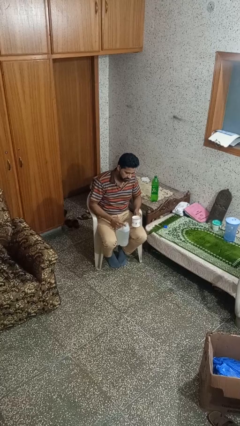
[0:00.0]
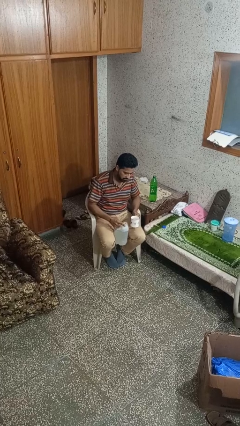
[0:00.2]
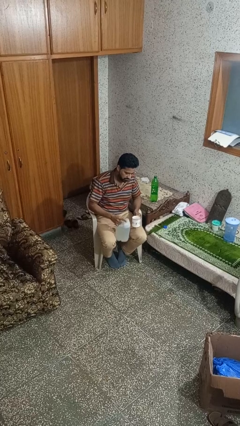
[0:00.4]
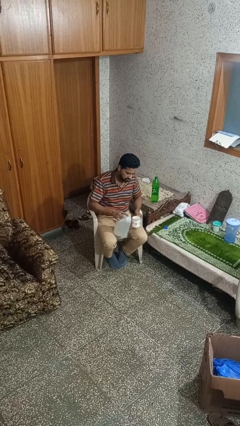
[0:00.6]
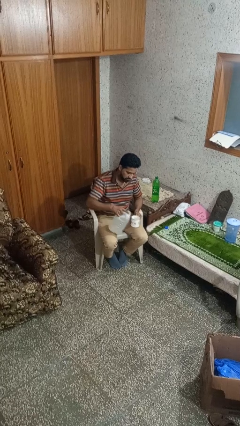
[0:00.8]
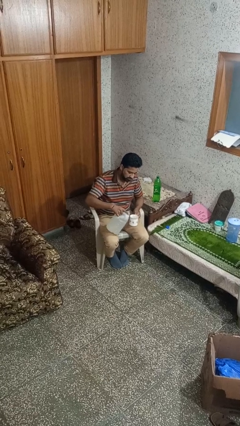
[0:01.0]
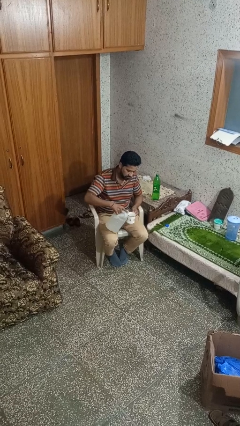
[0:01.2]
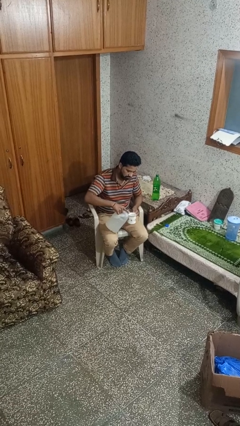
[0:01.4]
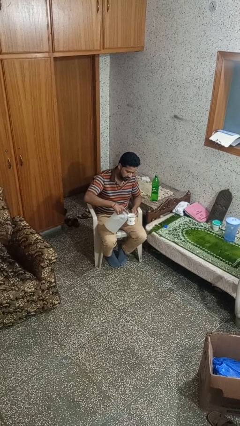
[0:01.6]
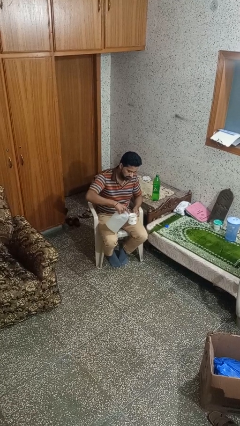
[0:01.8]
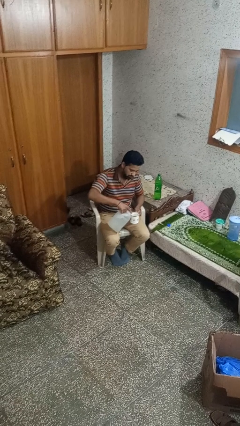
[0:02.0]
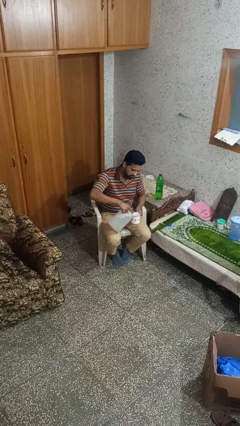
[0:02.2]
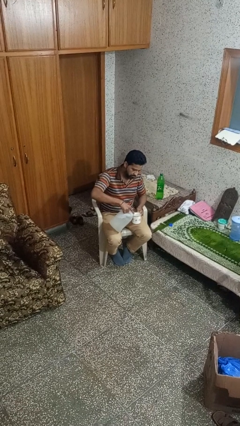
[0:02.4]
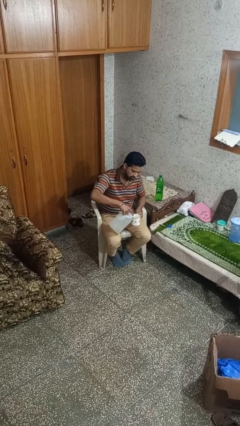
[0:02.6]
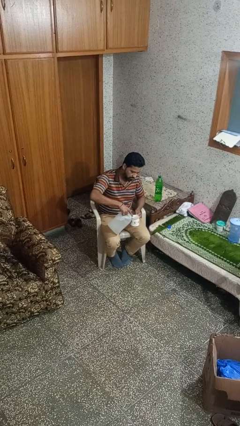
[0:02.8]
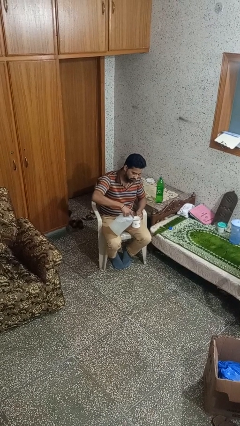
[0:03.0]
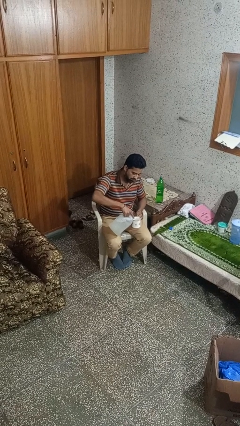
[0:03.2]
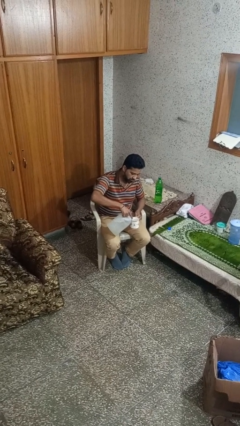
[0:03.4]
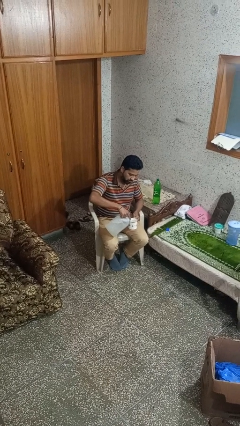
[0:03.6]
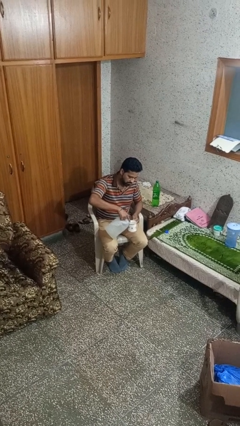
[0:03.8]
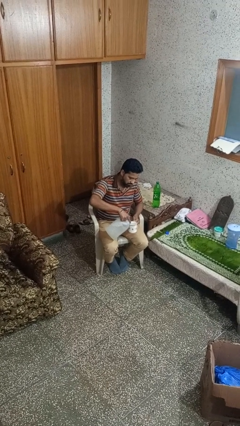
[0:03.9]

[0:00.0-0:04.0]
person pours liquid into cup

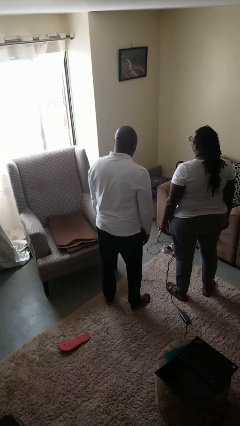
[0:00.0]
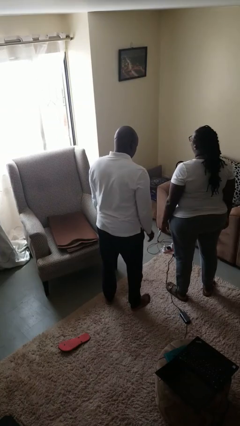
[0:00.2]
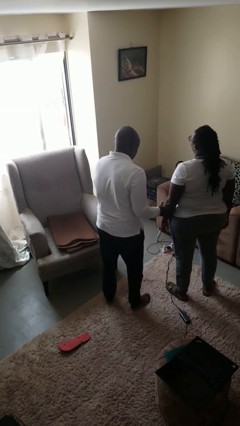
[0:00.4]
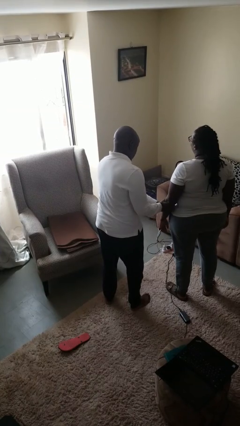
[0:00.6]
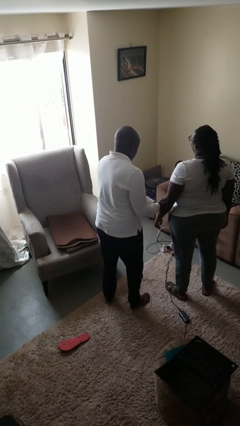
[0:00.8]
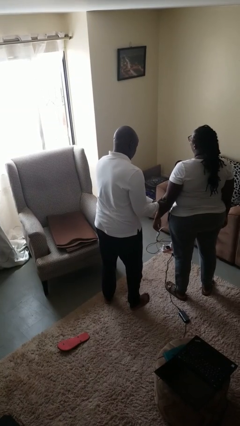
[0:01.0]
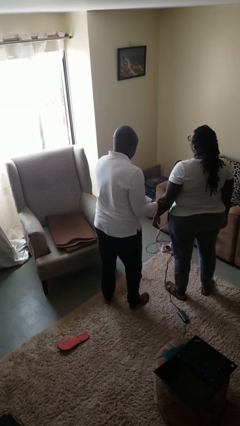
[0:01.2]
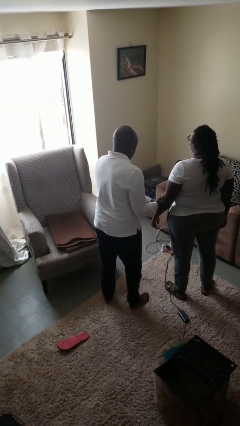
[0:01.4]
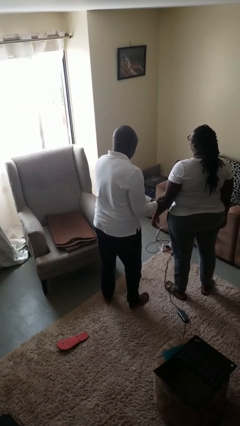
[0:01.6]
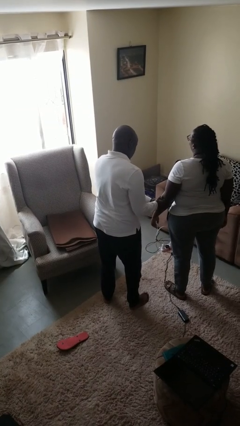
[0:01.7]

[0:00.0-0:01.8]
person grabs person by forearm

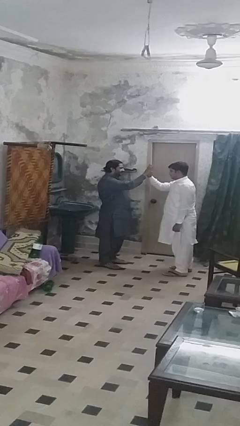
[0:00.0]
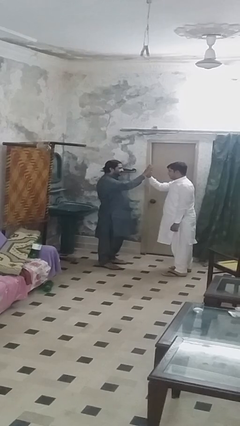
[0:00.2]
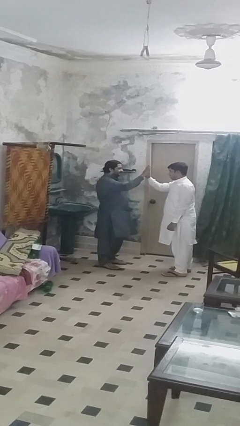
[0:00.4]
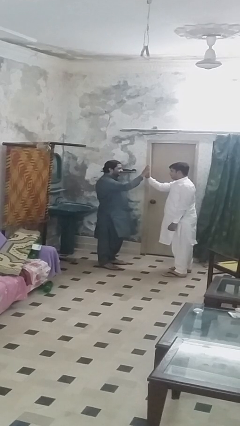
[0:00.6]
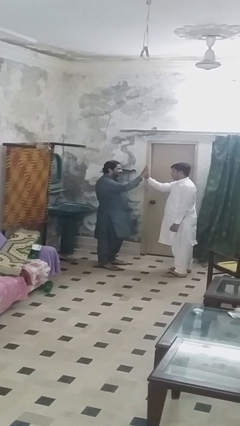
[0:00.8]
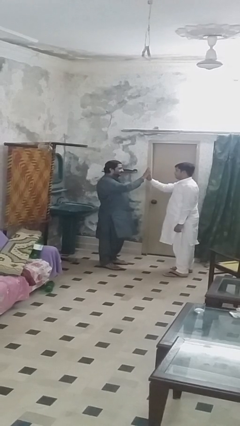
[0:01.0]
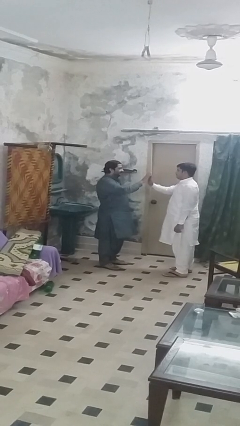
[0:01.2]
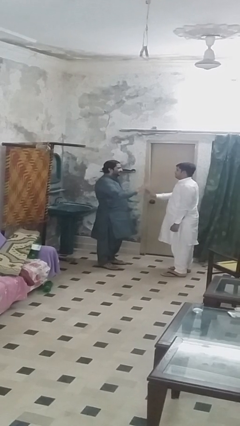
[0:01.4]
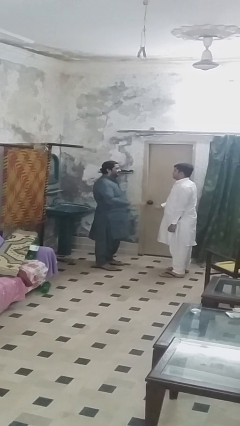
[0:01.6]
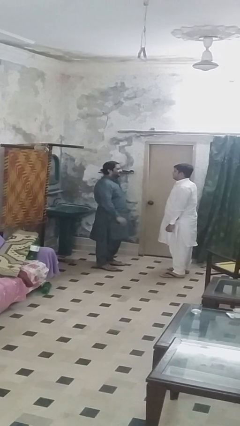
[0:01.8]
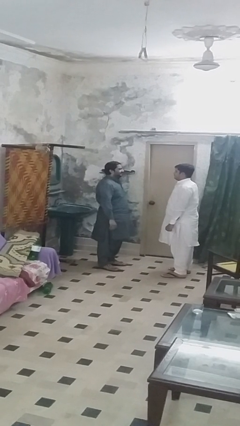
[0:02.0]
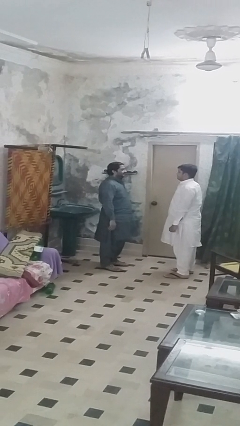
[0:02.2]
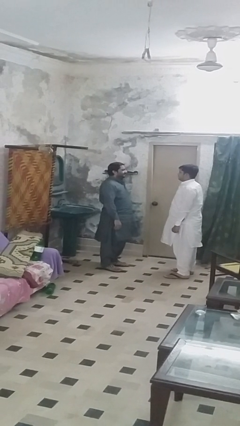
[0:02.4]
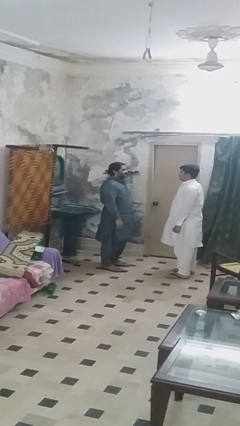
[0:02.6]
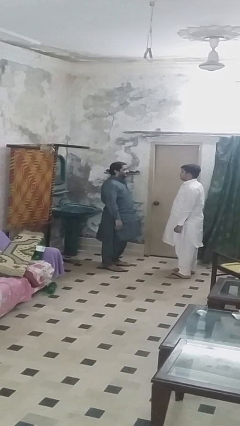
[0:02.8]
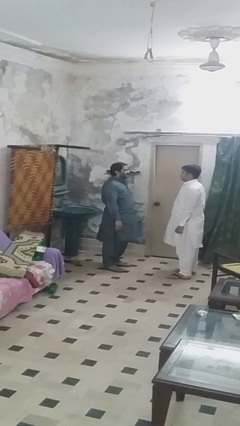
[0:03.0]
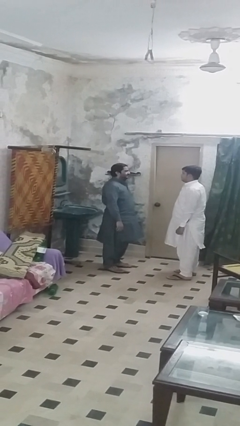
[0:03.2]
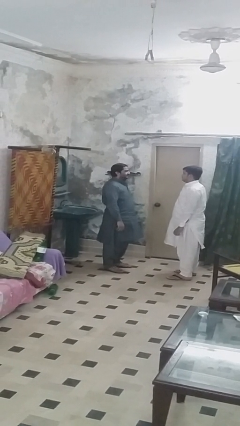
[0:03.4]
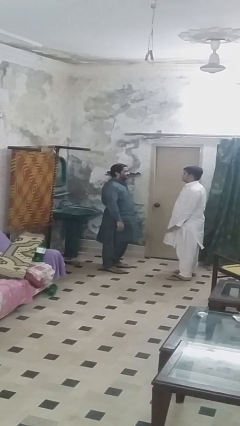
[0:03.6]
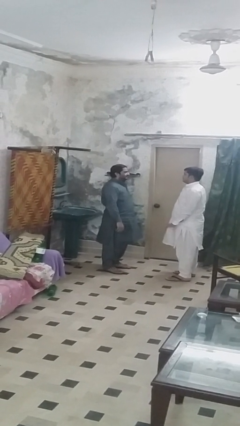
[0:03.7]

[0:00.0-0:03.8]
person highfives hand

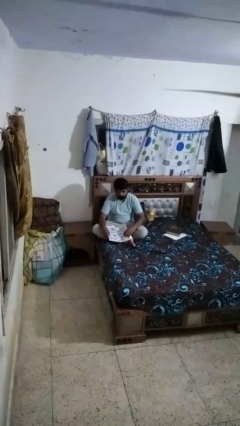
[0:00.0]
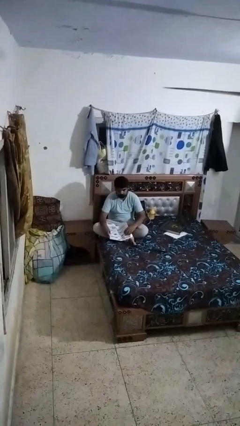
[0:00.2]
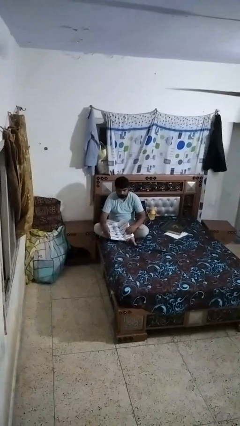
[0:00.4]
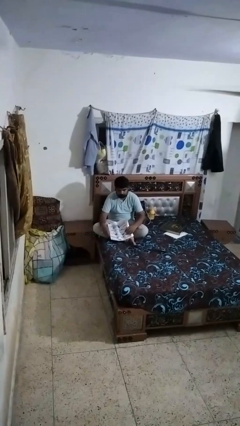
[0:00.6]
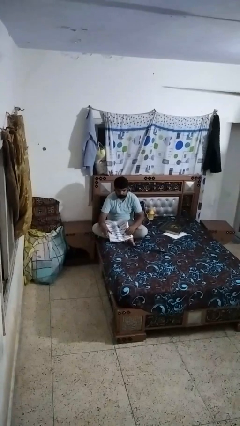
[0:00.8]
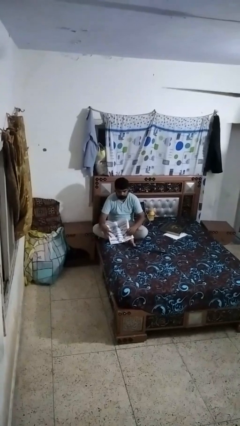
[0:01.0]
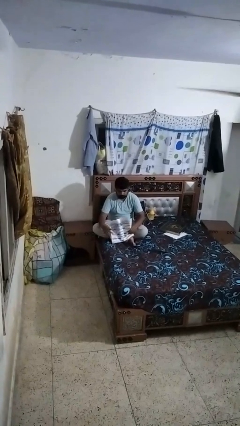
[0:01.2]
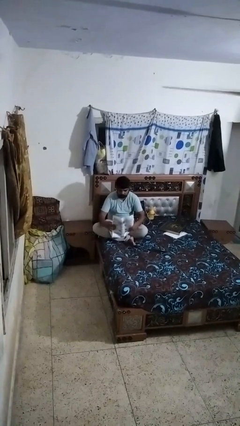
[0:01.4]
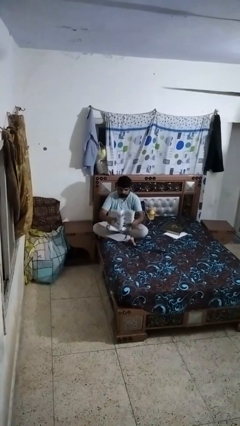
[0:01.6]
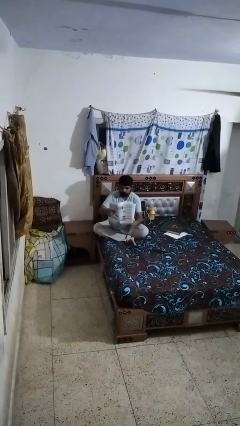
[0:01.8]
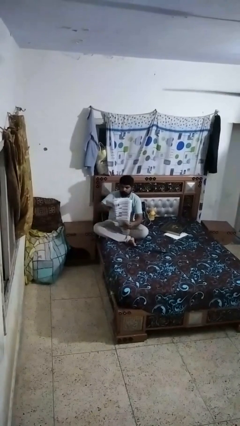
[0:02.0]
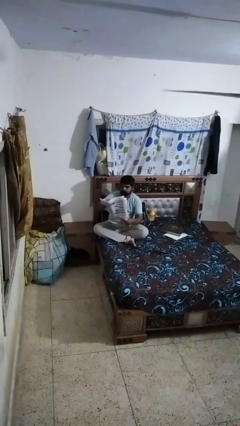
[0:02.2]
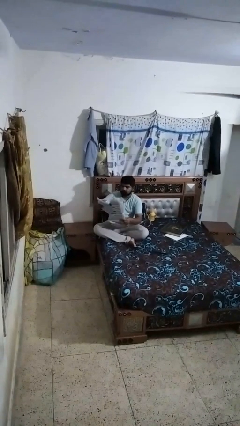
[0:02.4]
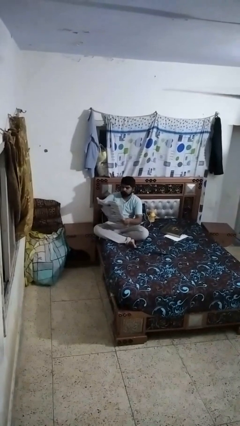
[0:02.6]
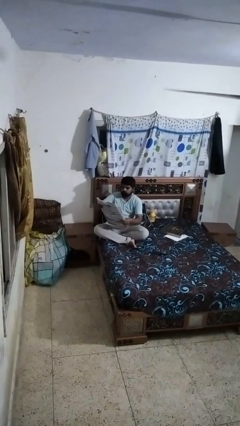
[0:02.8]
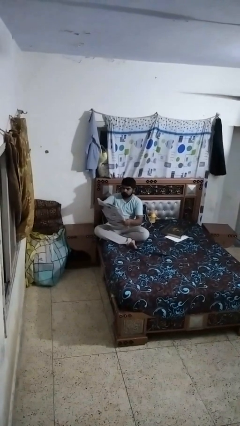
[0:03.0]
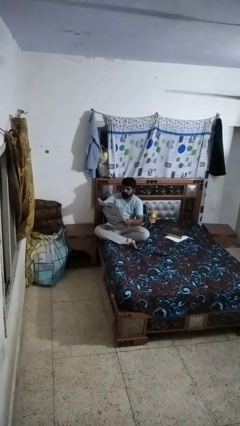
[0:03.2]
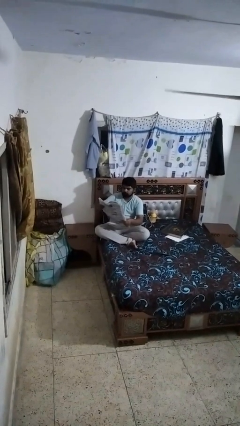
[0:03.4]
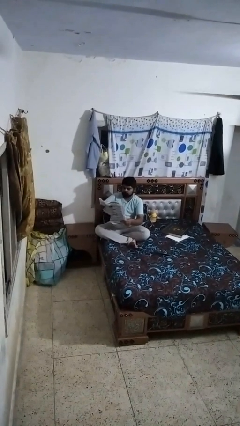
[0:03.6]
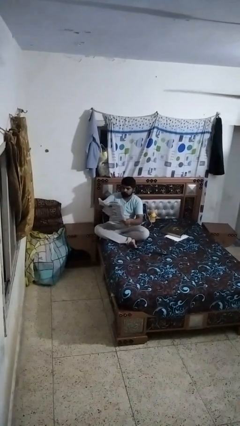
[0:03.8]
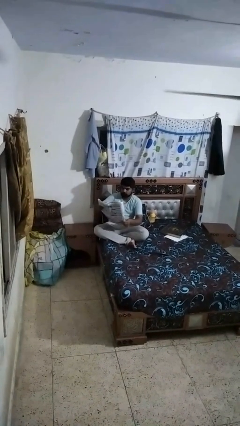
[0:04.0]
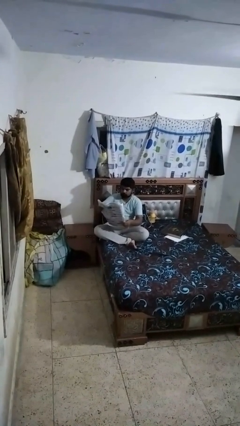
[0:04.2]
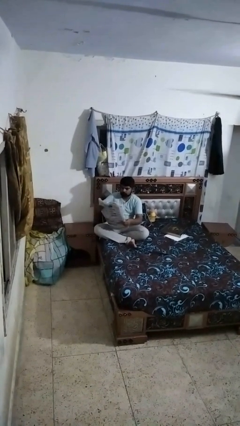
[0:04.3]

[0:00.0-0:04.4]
person reads newspaper

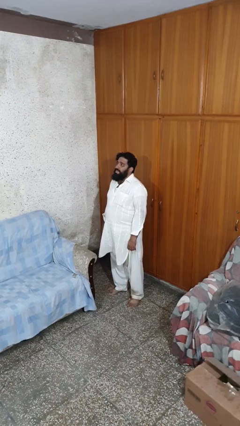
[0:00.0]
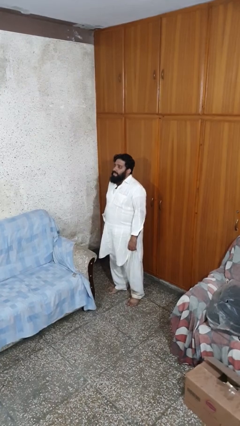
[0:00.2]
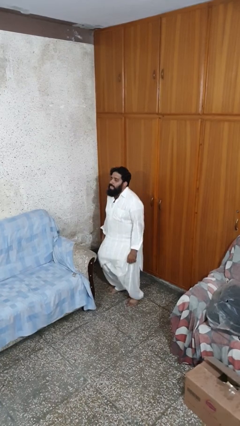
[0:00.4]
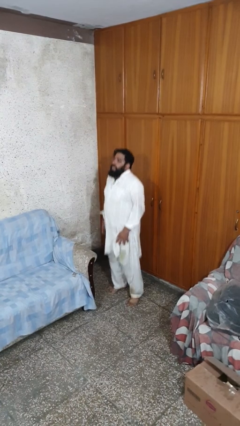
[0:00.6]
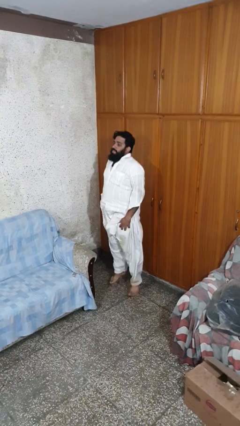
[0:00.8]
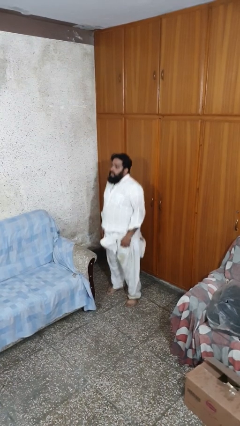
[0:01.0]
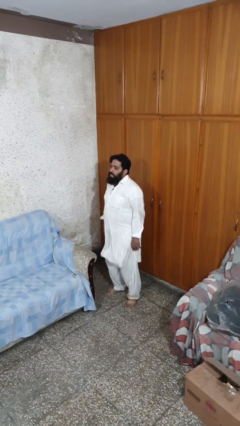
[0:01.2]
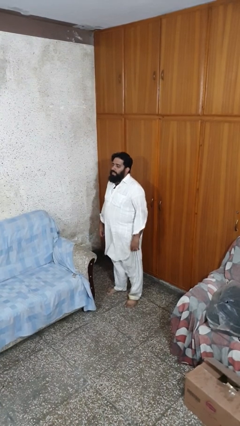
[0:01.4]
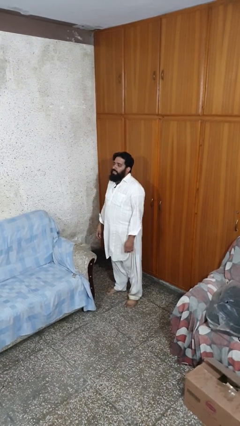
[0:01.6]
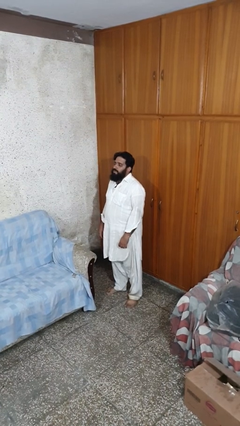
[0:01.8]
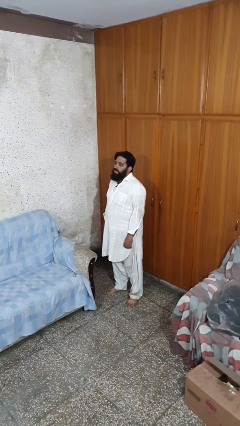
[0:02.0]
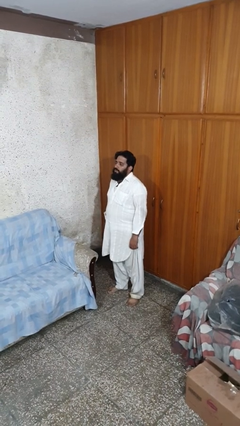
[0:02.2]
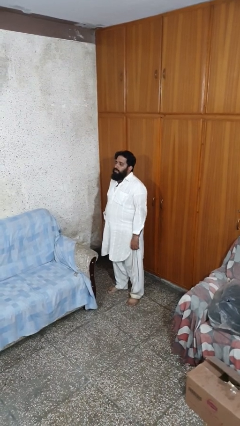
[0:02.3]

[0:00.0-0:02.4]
person jumps

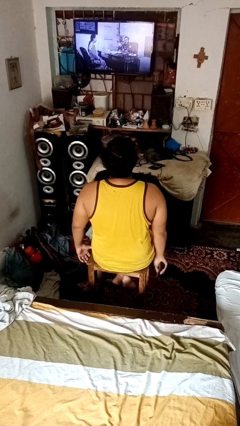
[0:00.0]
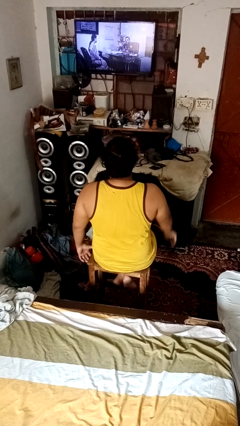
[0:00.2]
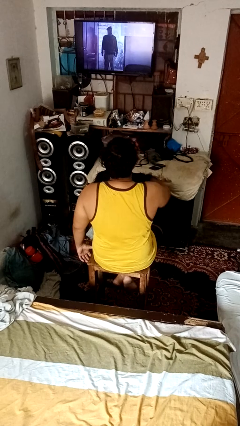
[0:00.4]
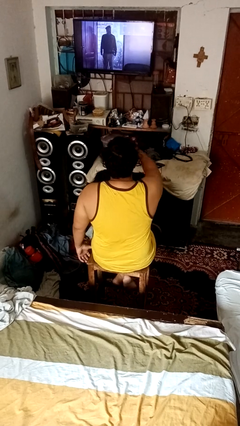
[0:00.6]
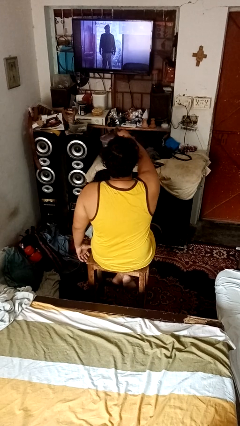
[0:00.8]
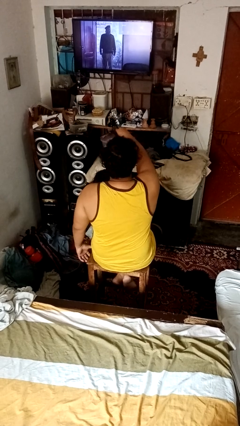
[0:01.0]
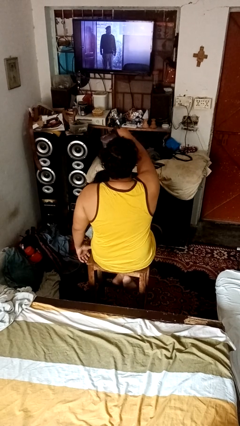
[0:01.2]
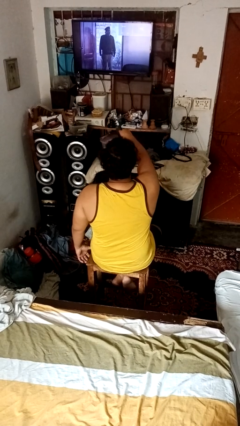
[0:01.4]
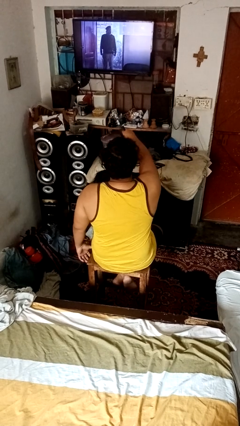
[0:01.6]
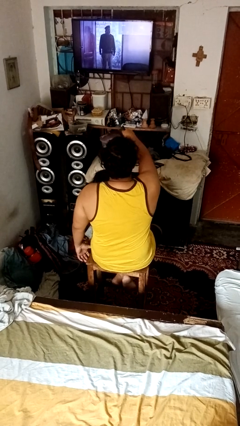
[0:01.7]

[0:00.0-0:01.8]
person uses television remote
